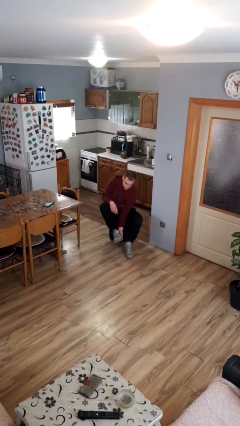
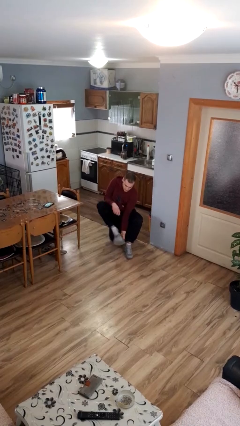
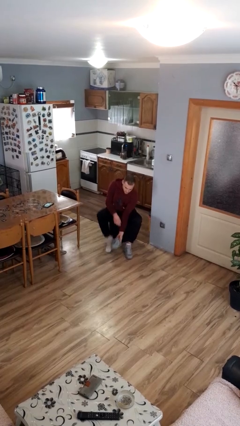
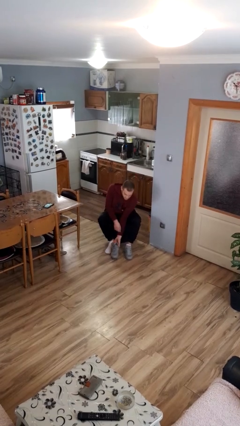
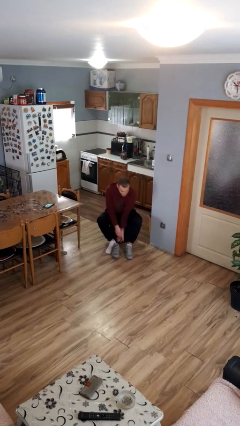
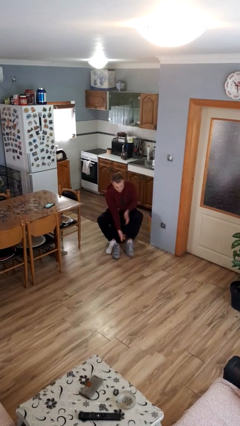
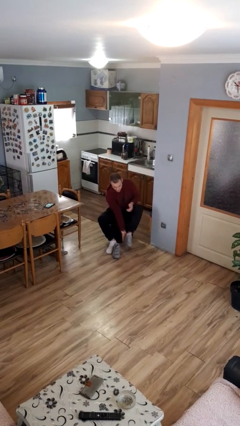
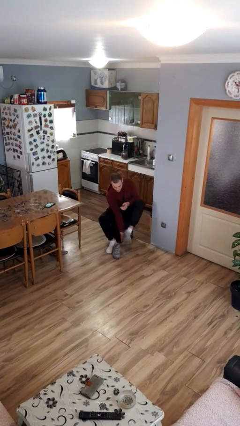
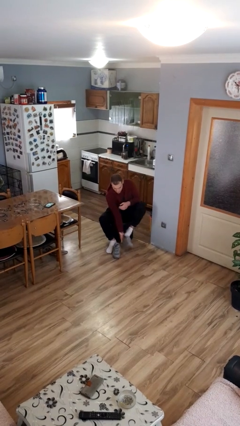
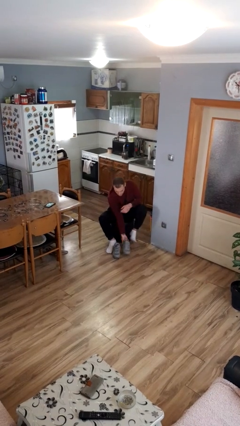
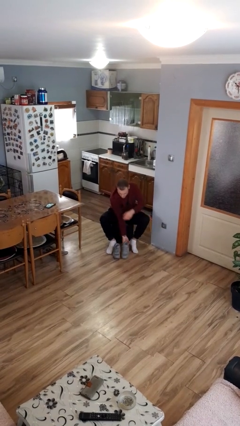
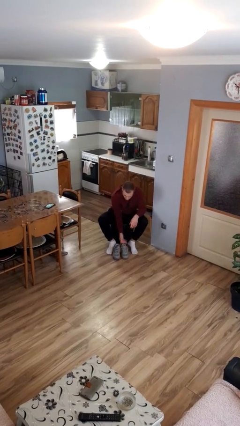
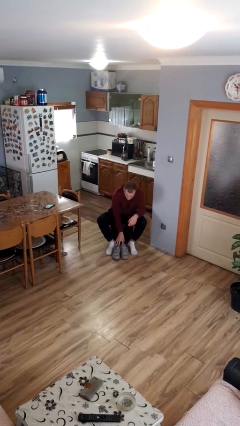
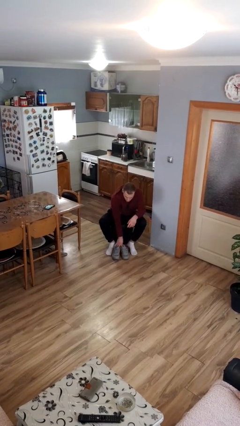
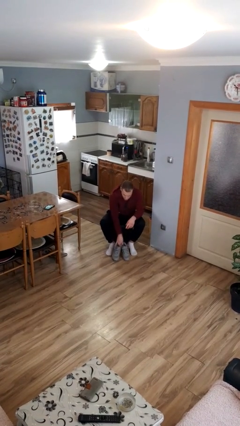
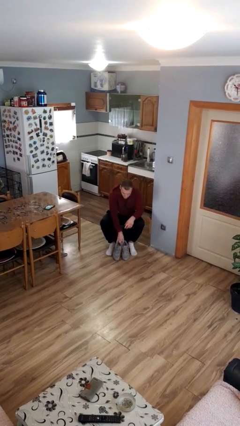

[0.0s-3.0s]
person takes off shoes

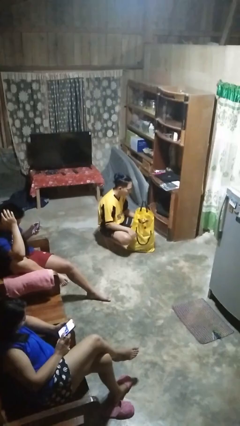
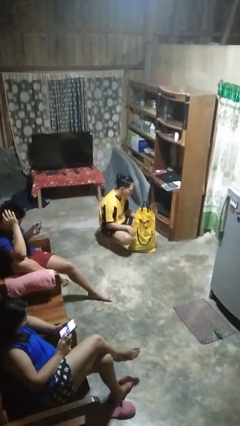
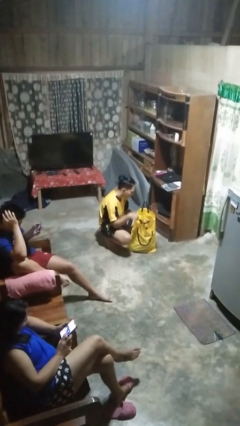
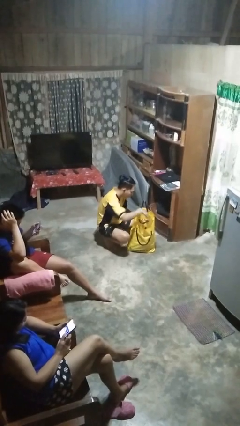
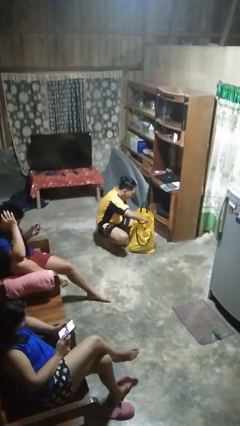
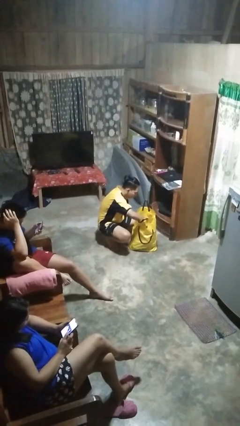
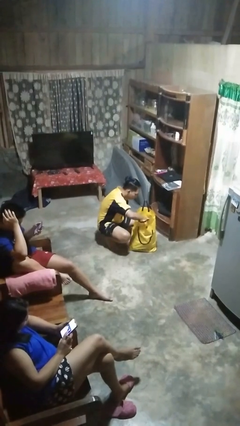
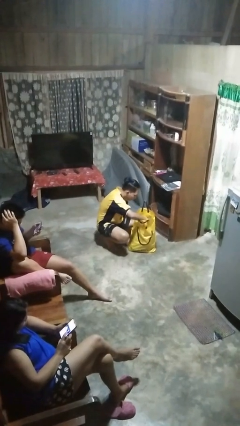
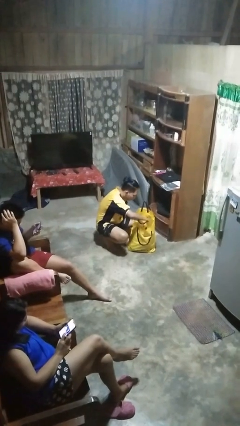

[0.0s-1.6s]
person searches in bag

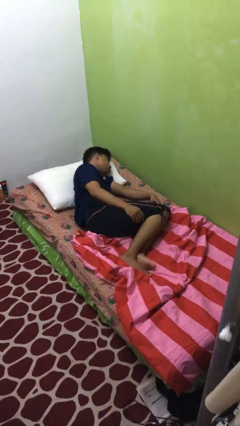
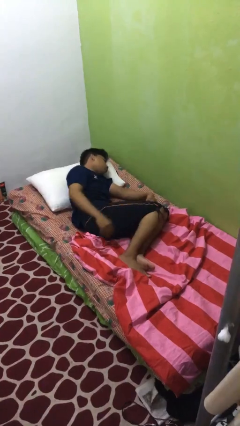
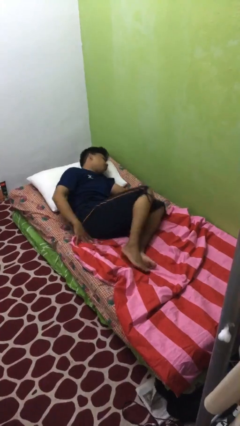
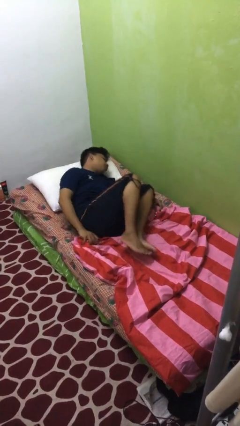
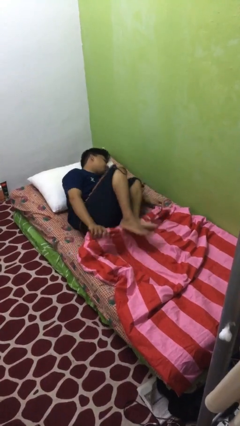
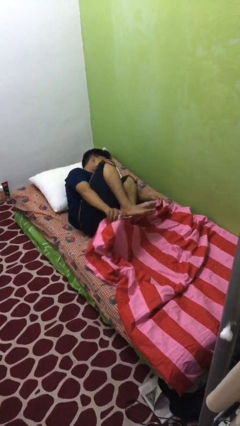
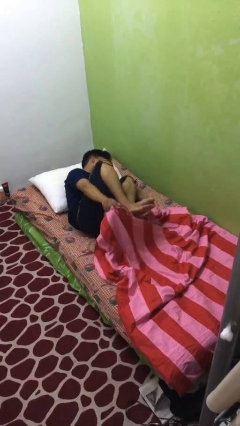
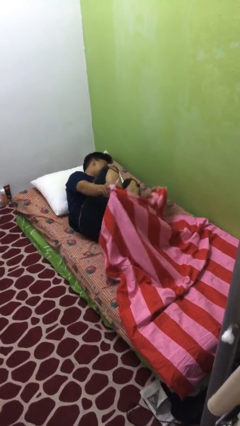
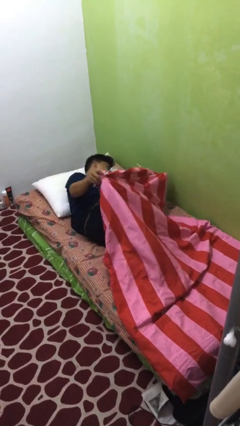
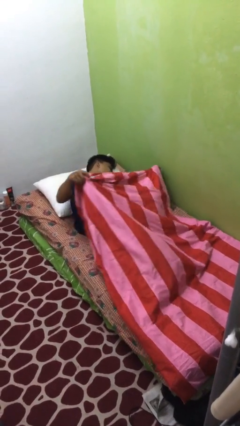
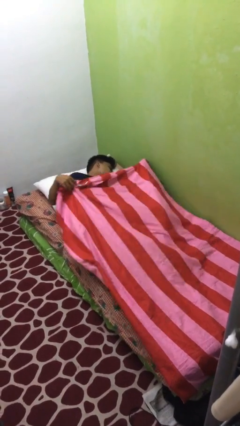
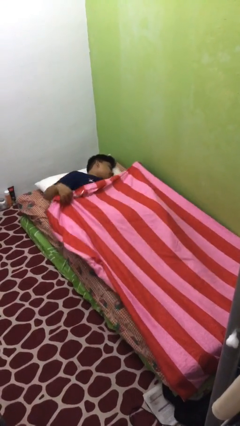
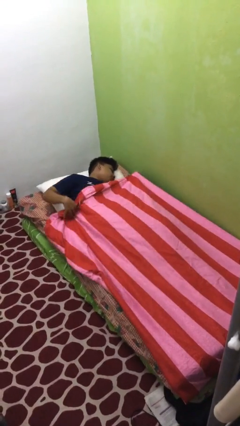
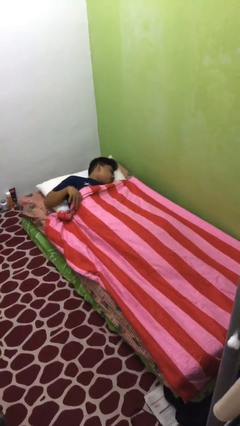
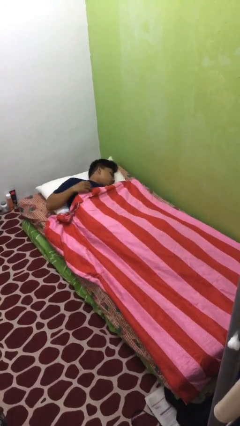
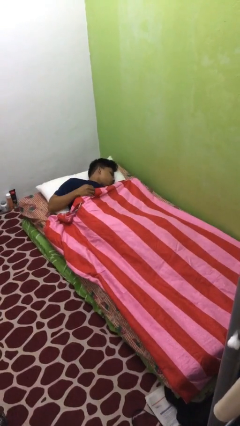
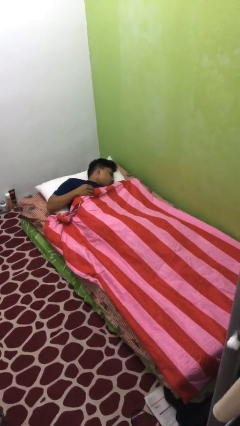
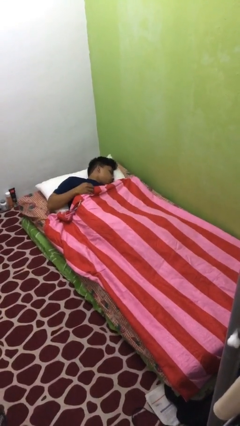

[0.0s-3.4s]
person covers with bedsheets

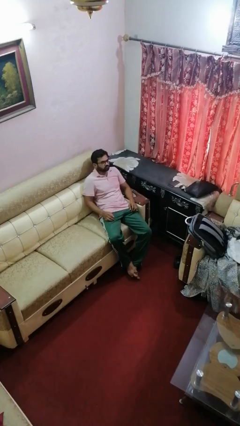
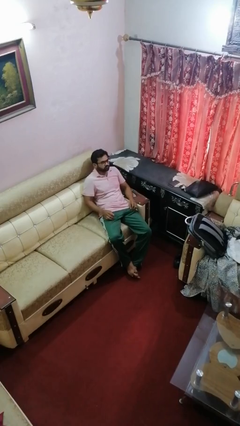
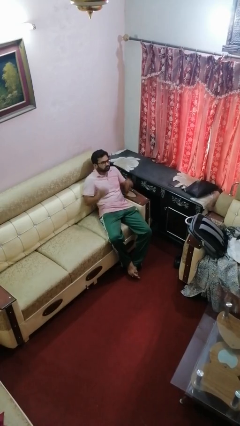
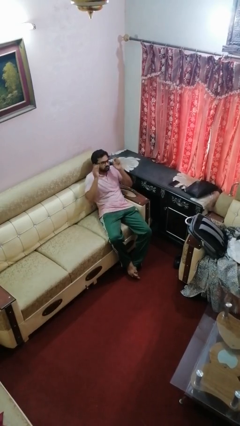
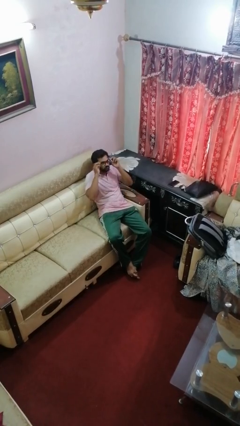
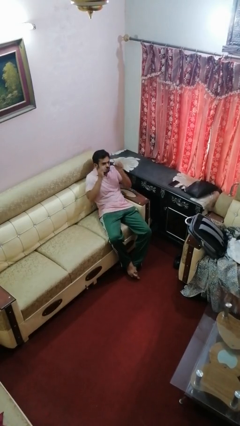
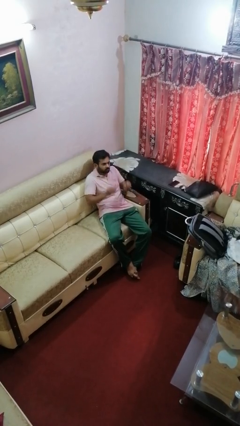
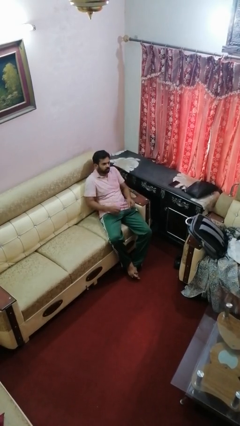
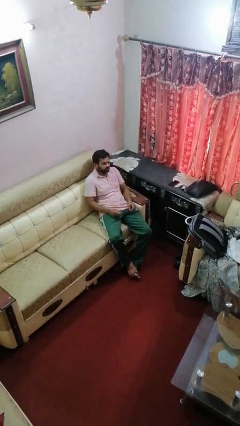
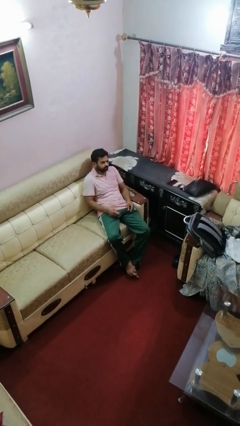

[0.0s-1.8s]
person takes off glasses

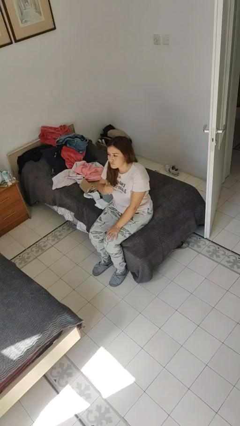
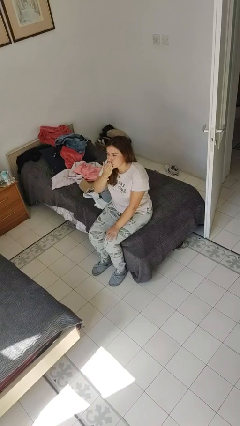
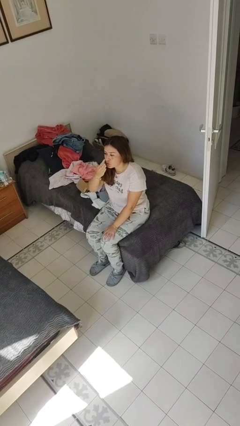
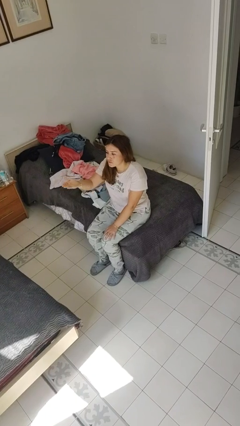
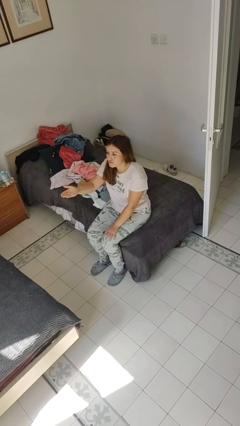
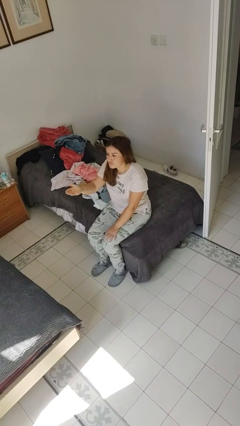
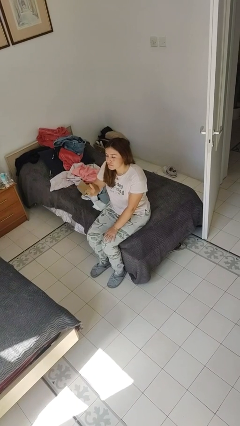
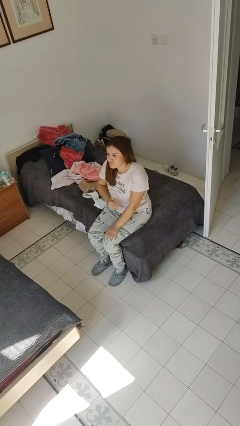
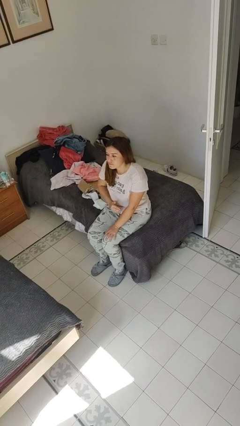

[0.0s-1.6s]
person gestures blow kiss

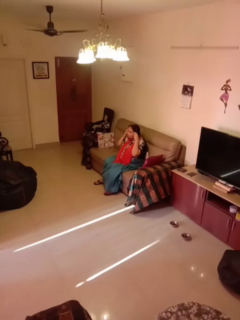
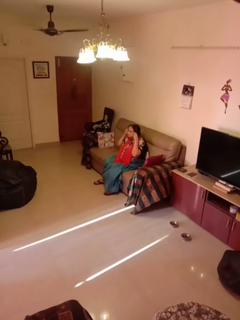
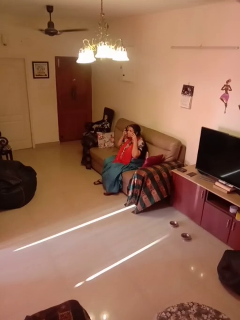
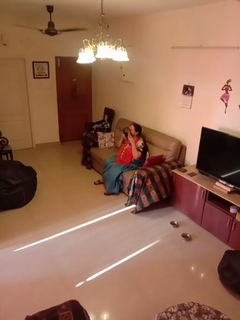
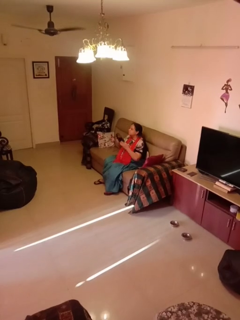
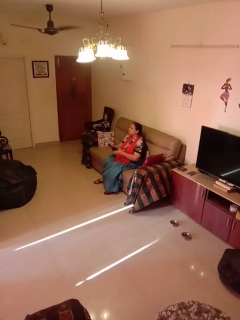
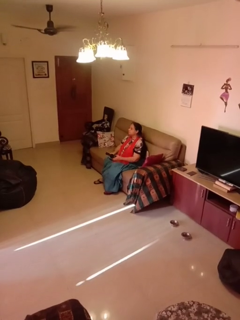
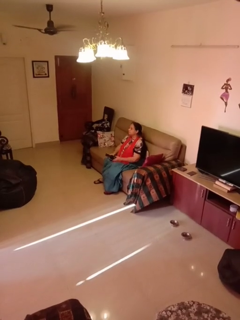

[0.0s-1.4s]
person takes off headphones

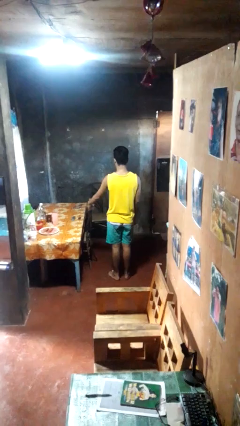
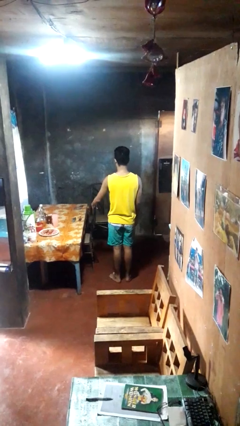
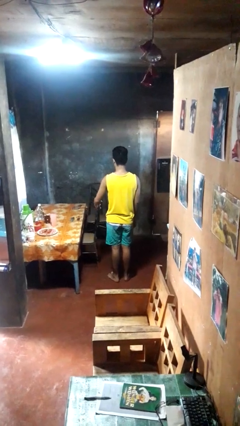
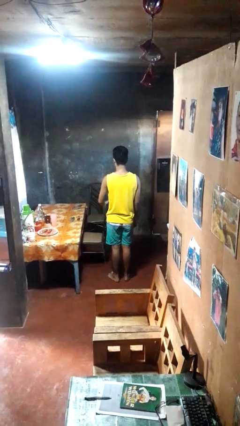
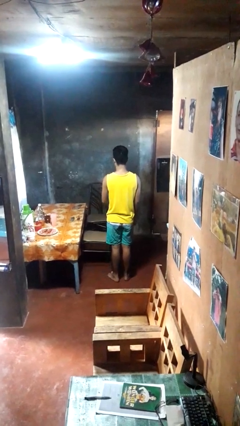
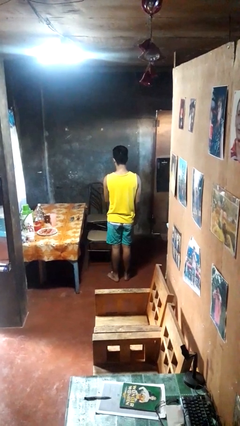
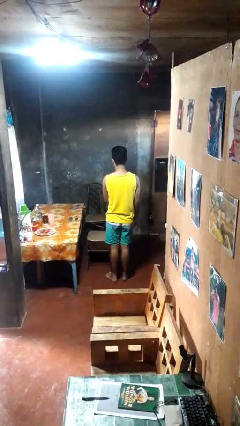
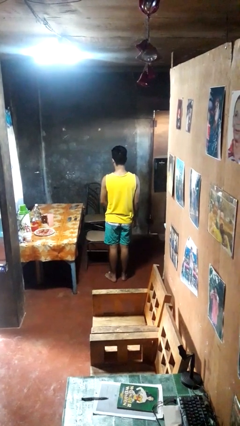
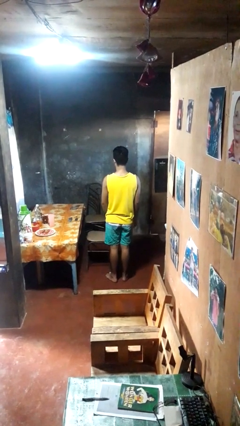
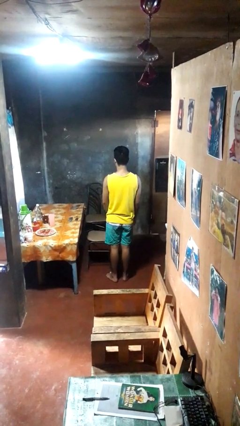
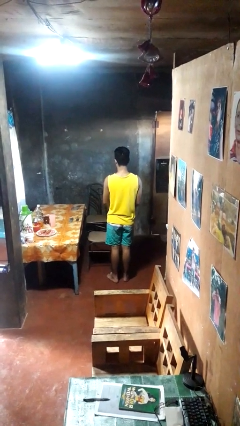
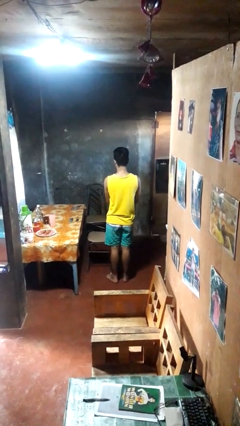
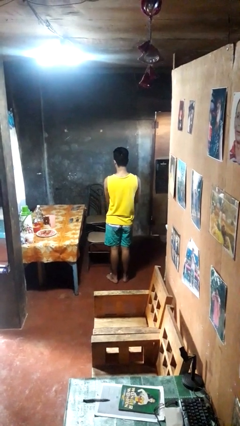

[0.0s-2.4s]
person pulls out chair

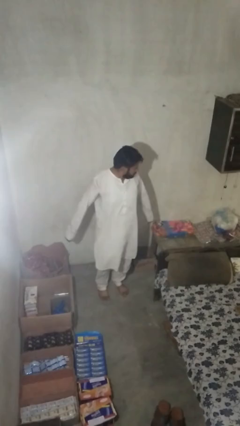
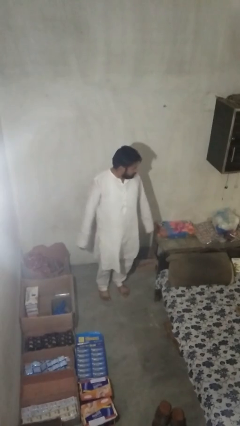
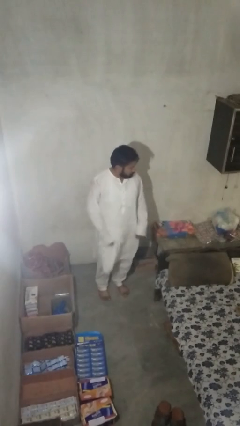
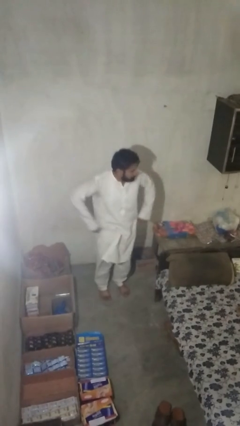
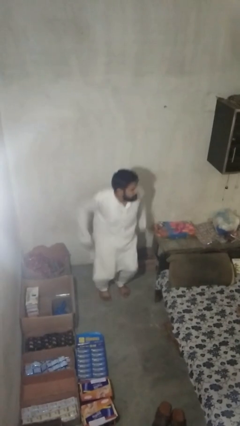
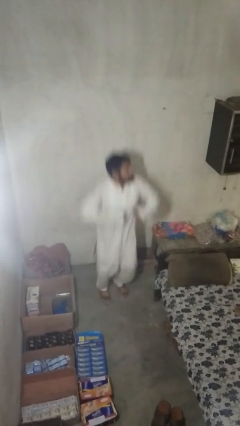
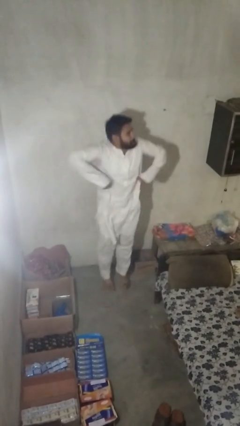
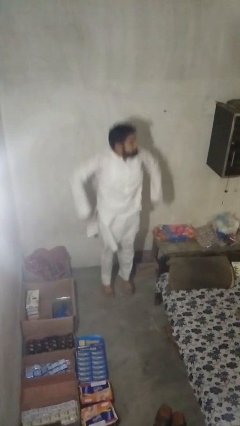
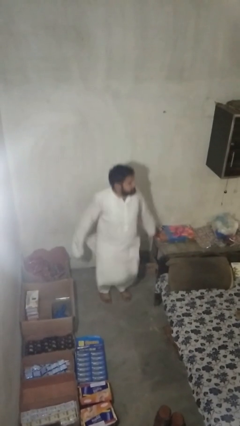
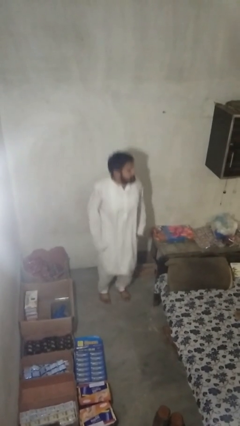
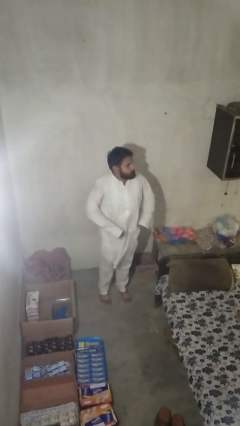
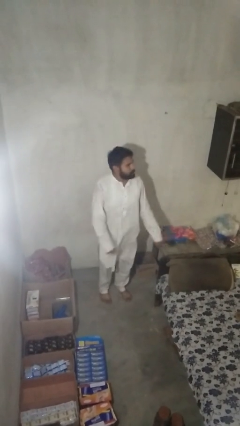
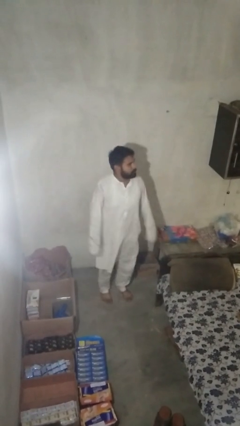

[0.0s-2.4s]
person jumps
